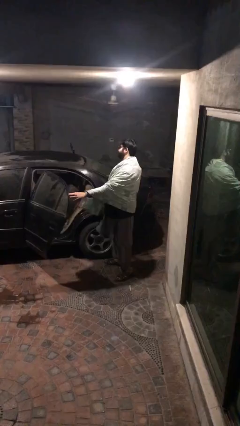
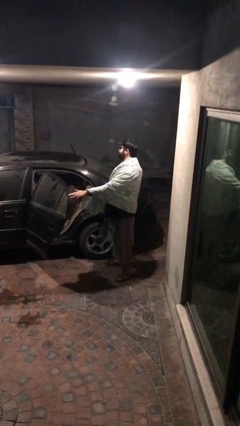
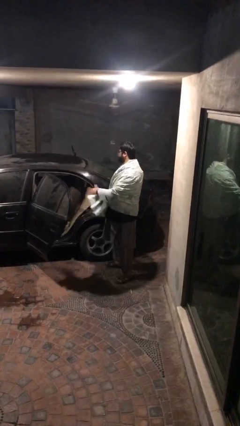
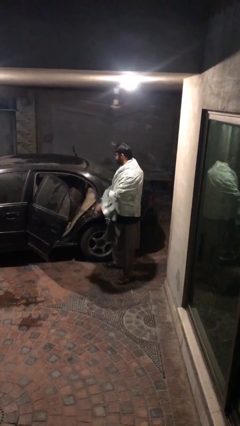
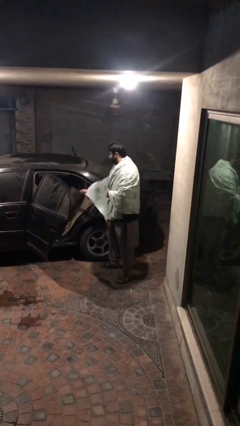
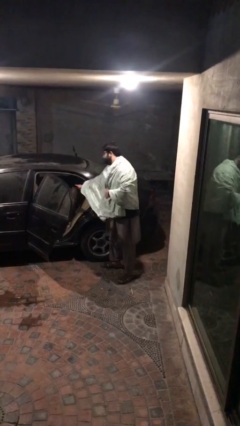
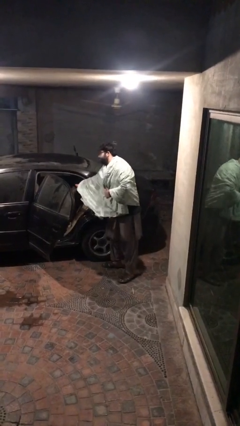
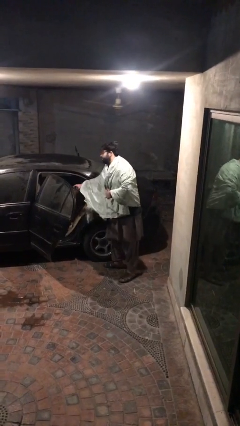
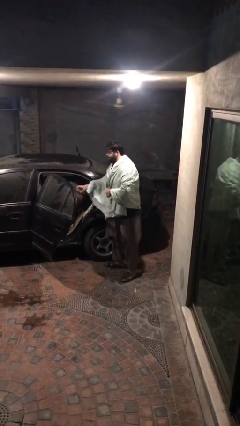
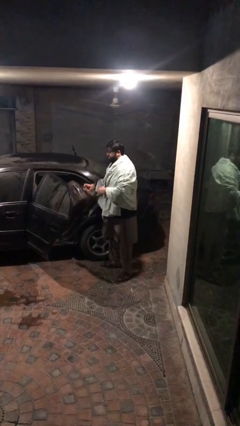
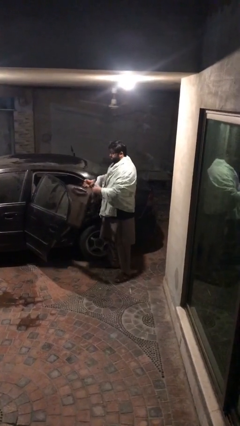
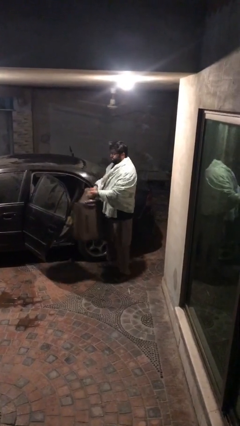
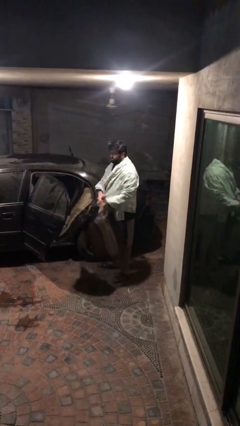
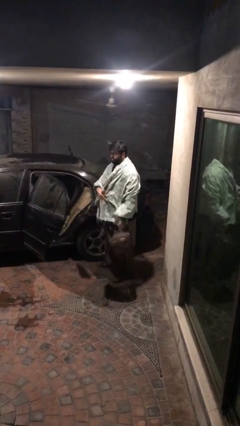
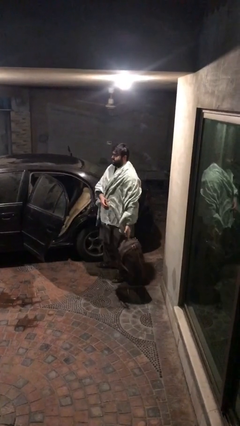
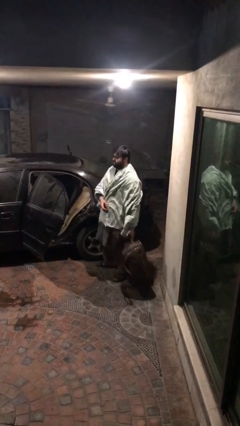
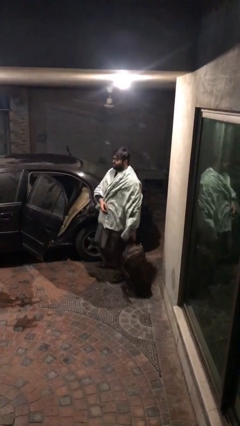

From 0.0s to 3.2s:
person unloads car

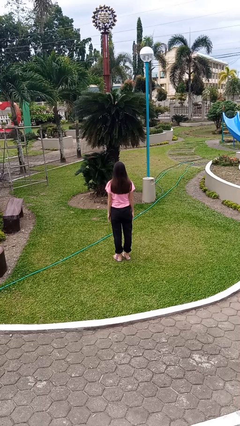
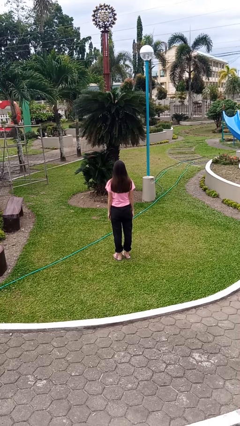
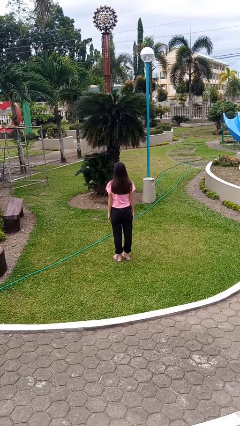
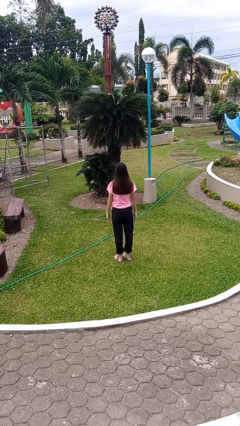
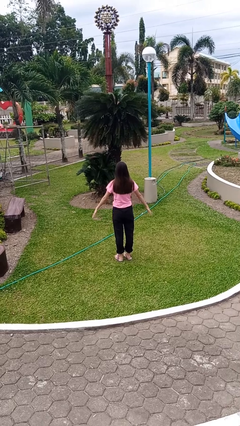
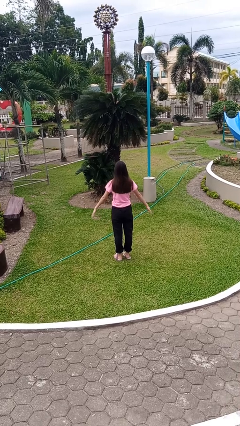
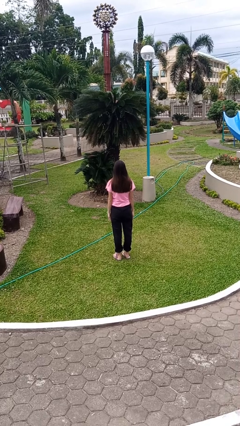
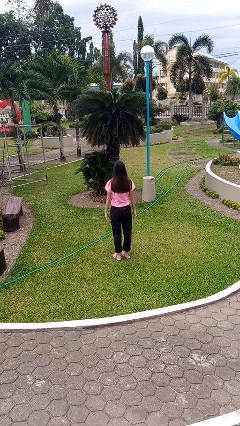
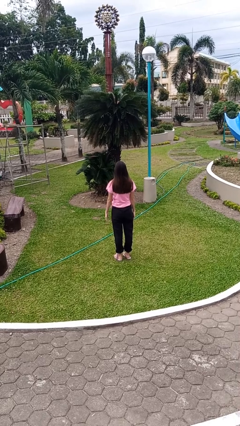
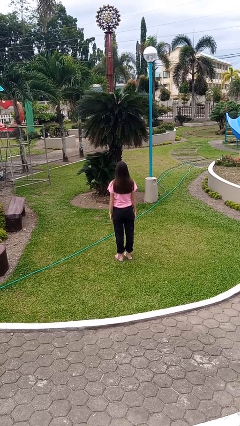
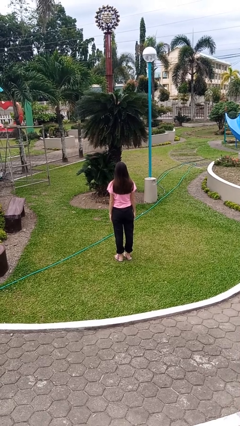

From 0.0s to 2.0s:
person slaps hands on thighs

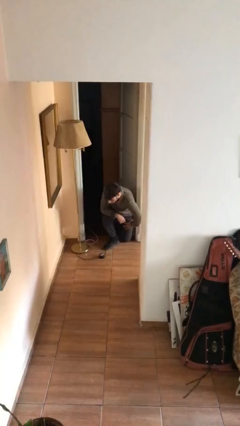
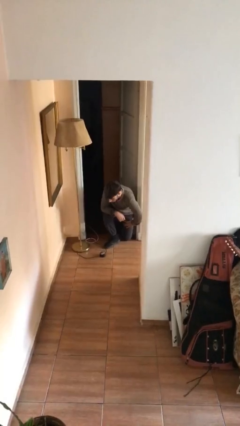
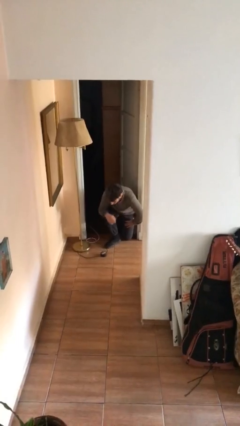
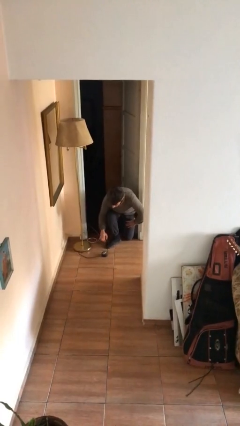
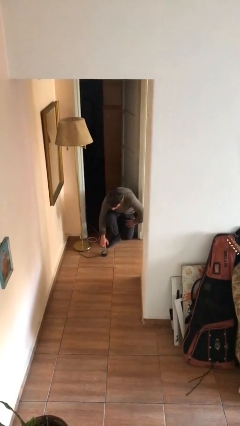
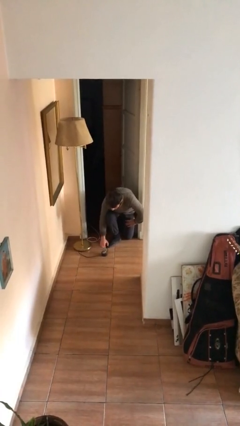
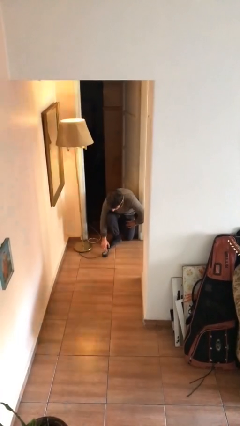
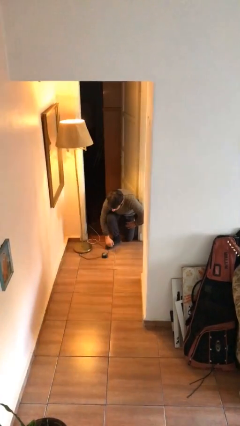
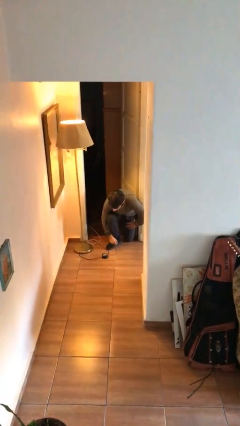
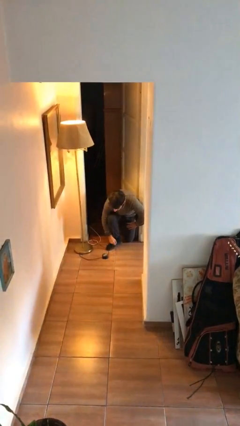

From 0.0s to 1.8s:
person turns on lamp

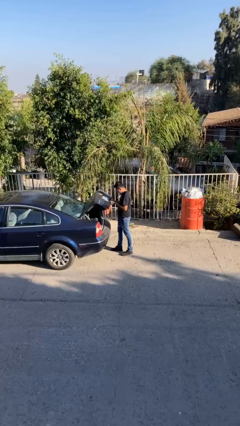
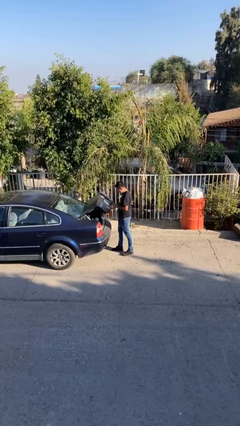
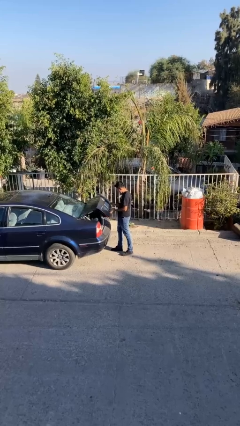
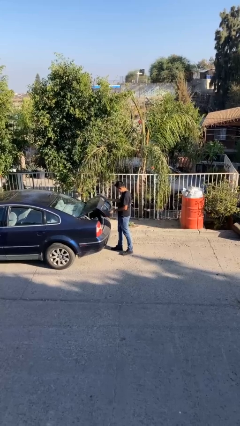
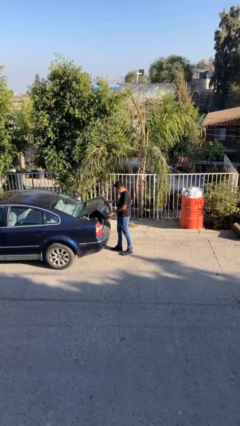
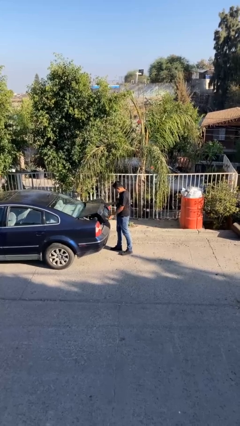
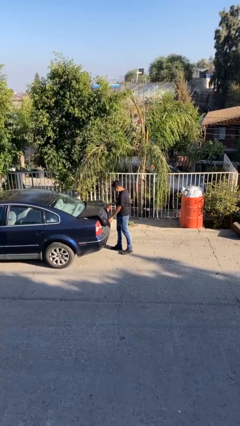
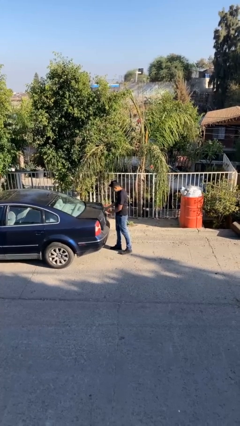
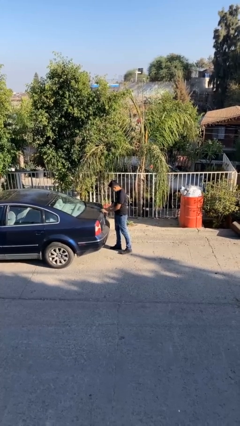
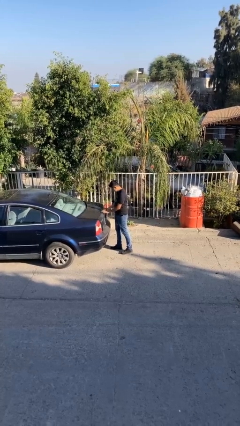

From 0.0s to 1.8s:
person closes car trunk

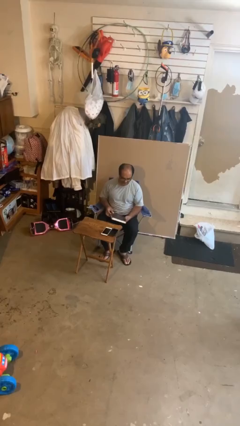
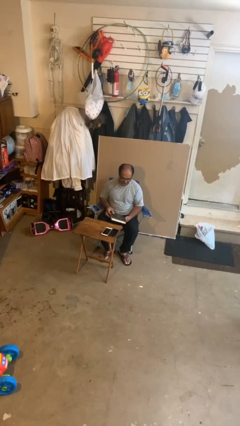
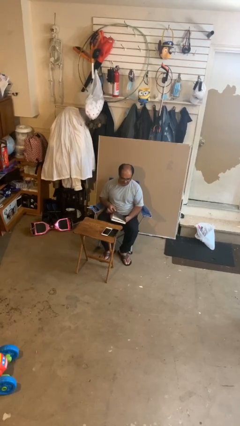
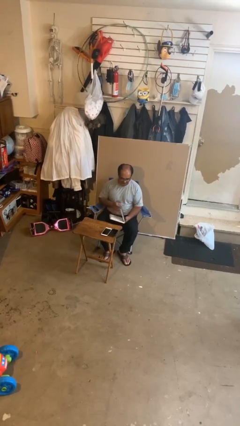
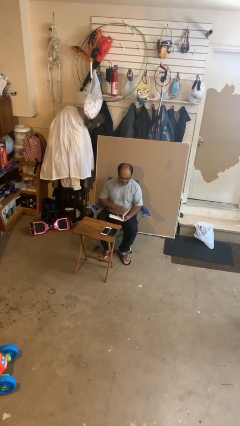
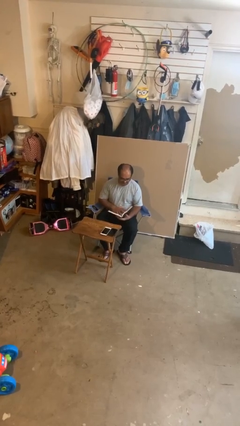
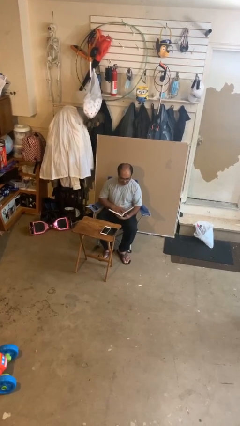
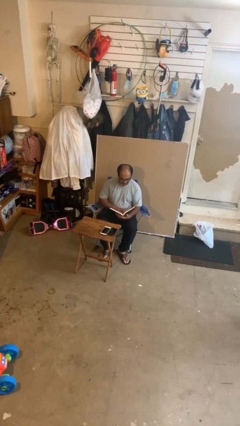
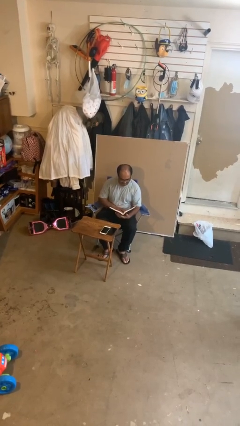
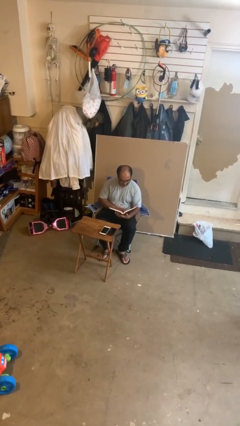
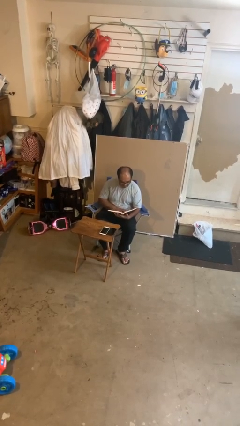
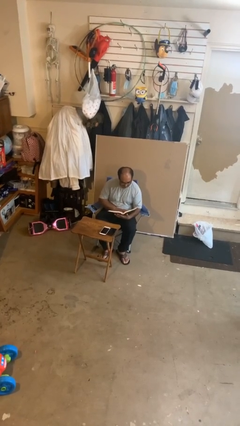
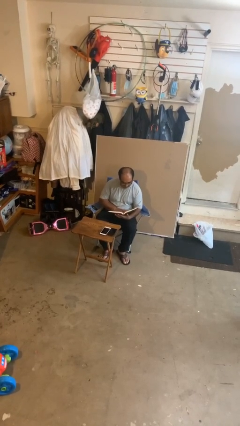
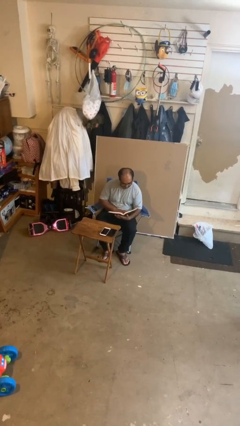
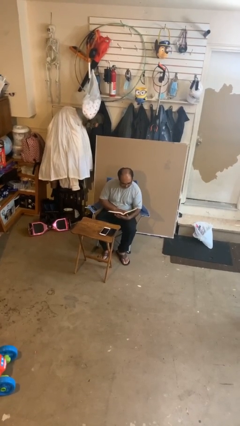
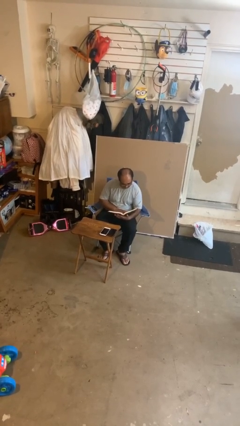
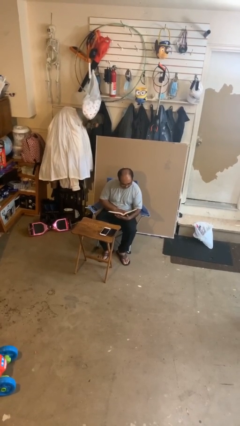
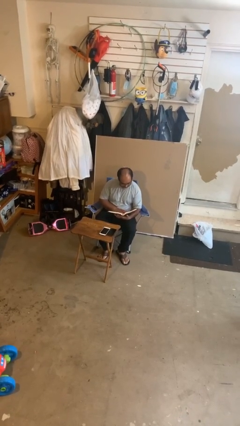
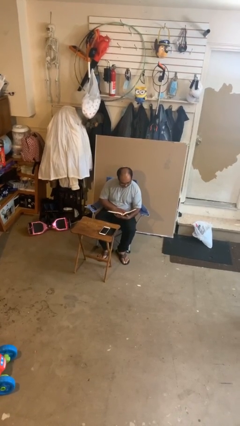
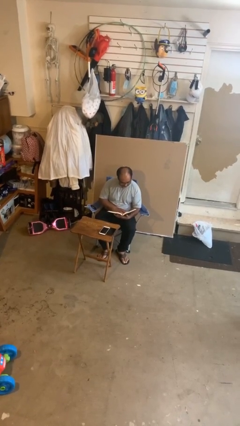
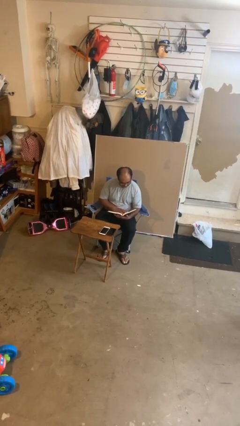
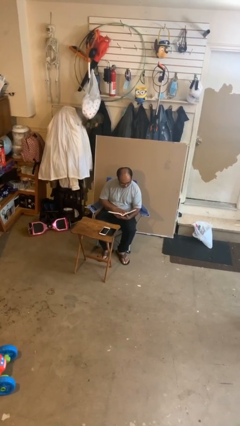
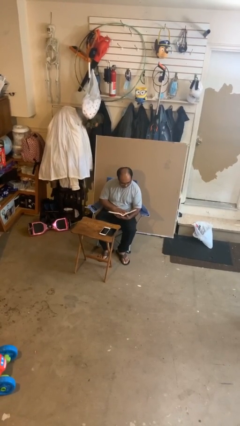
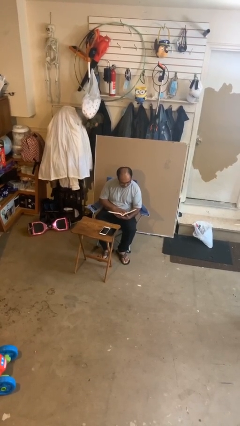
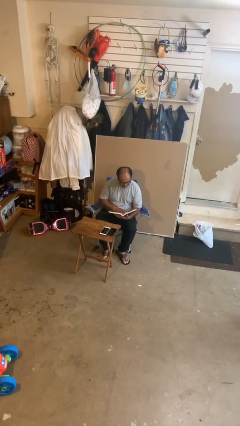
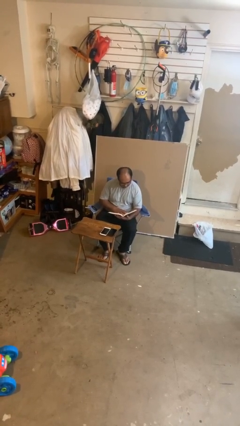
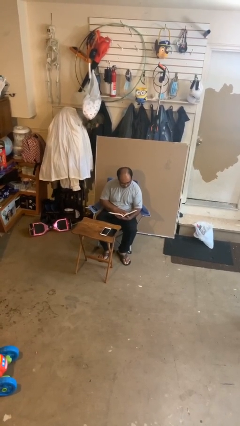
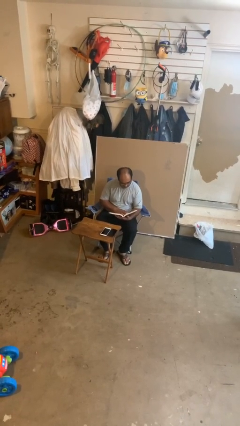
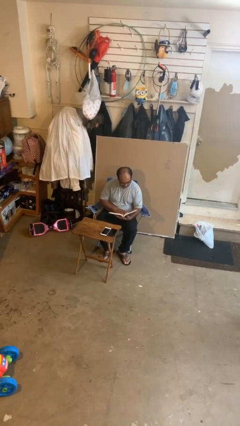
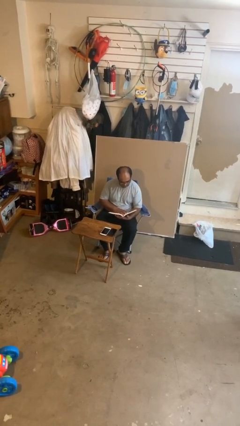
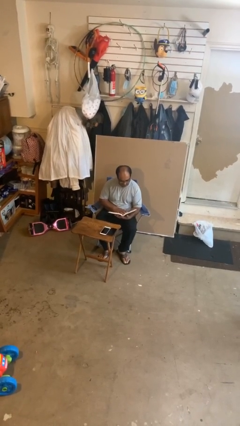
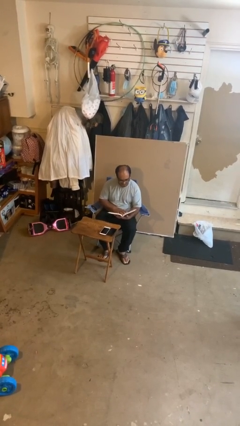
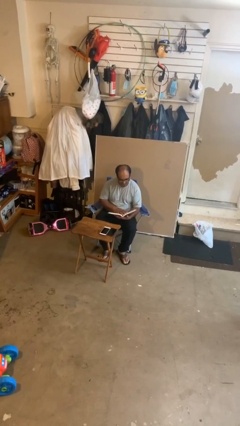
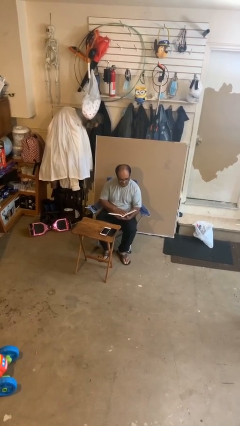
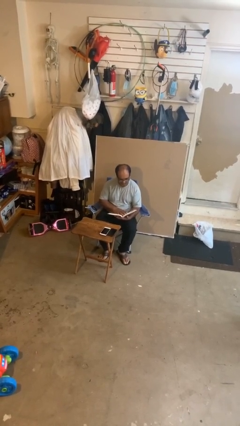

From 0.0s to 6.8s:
person reads document

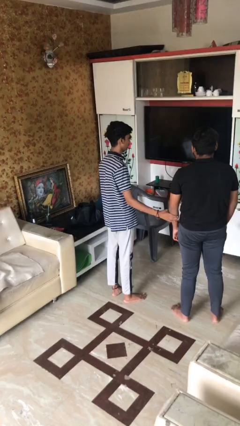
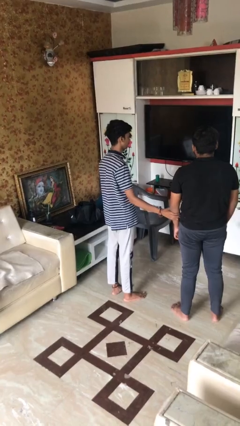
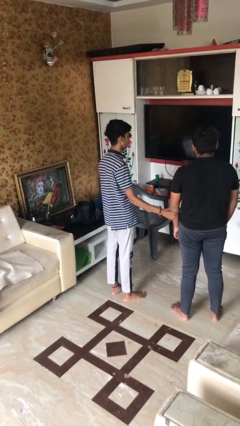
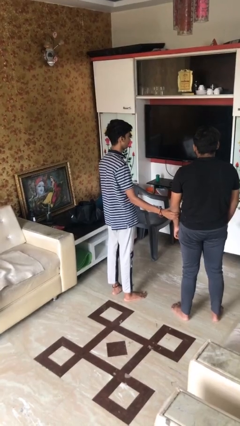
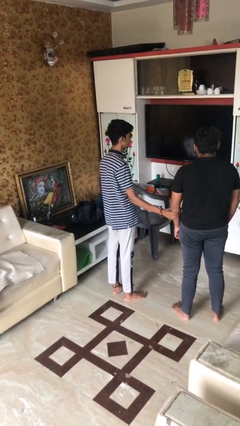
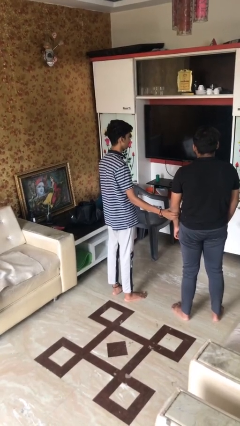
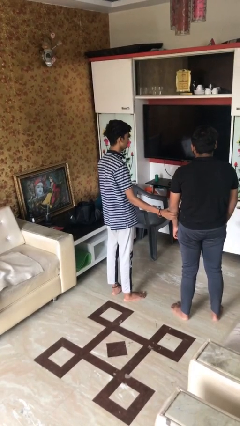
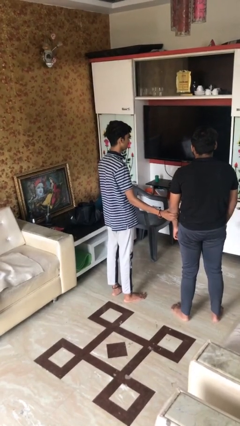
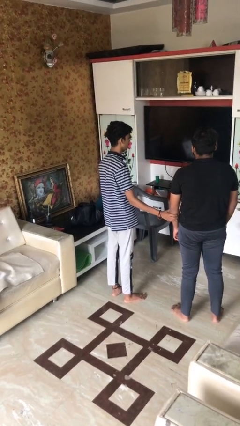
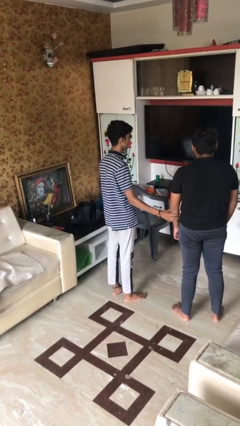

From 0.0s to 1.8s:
person grabs person by forearm
